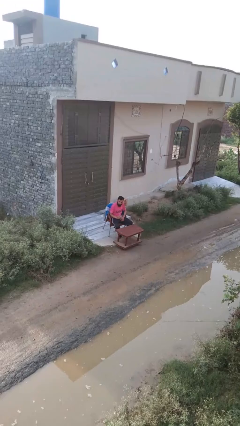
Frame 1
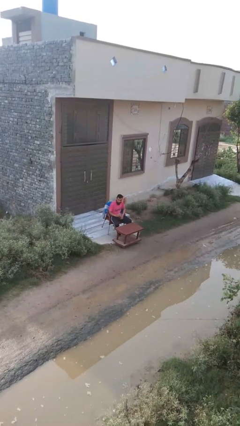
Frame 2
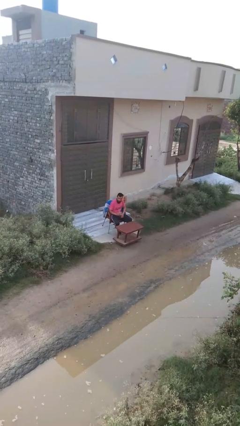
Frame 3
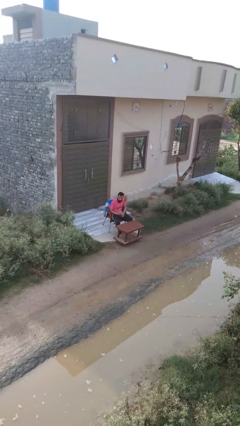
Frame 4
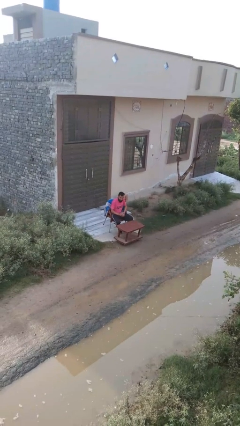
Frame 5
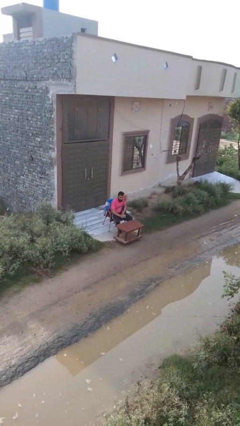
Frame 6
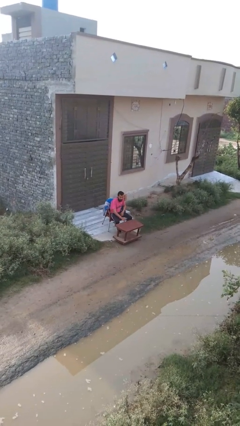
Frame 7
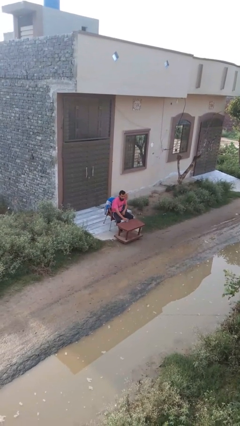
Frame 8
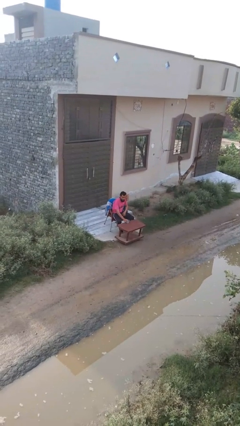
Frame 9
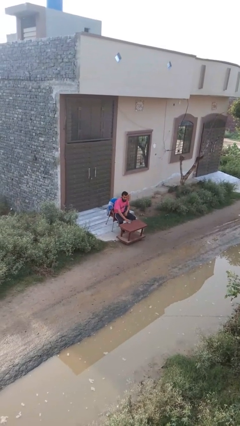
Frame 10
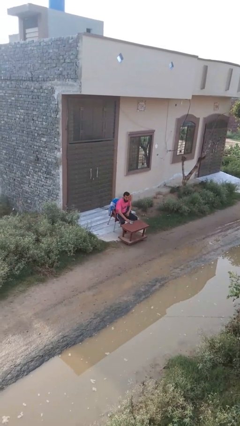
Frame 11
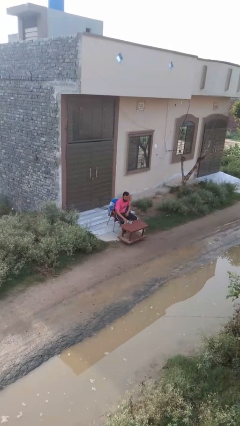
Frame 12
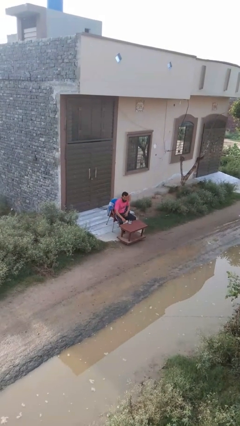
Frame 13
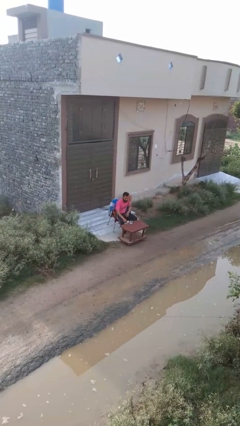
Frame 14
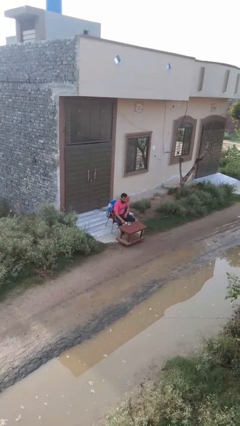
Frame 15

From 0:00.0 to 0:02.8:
person puts down object on table

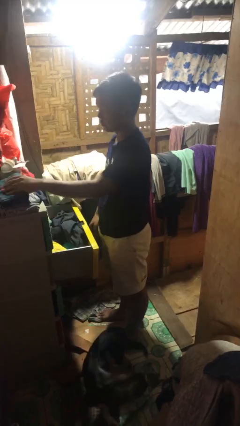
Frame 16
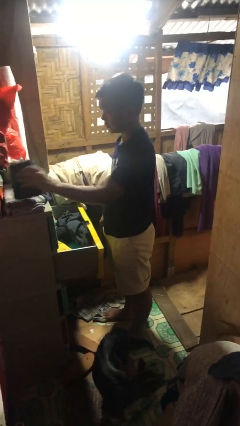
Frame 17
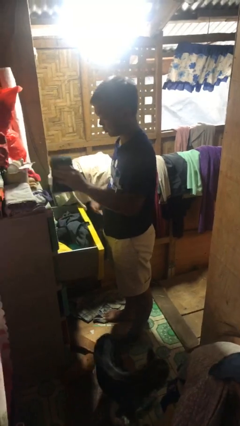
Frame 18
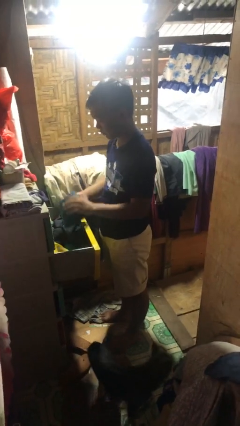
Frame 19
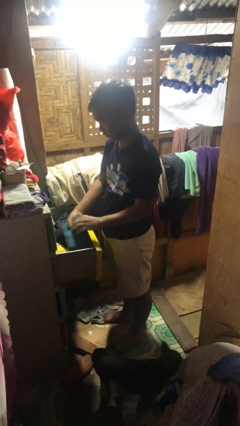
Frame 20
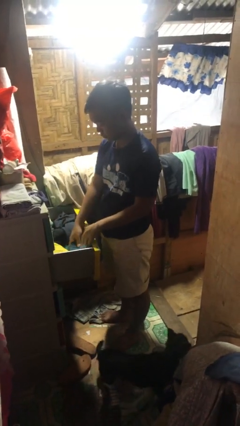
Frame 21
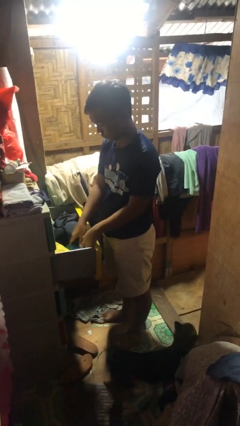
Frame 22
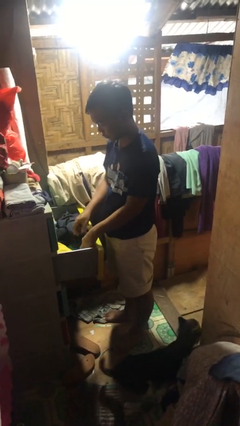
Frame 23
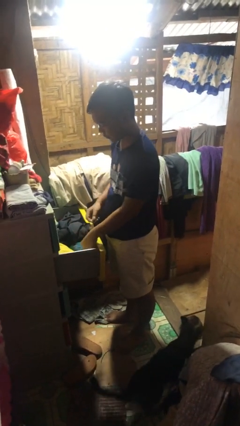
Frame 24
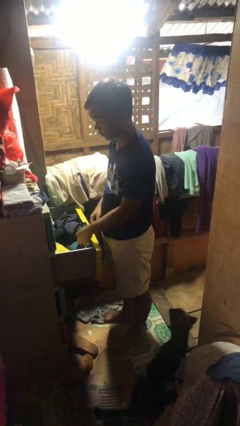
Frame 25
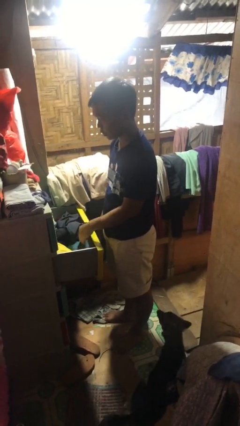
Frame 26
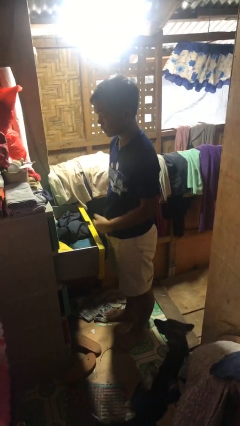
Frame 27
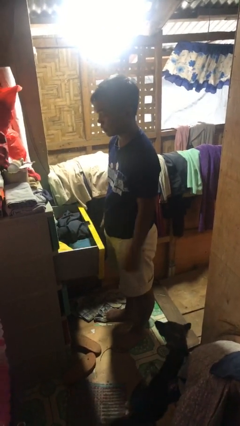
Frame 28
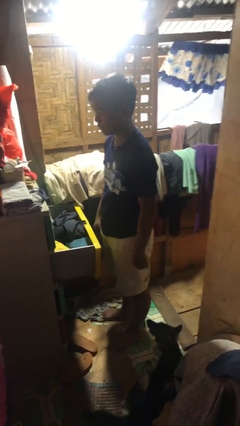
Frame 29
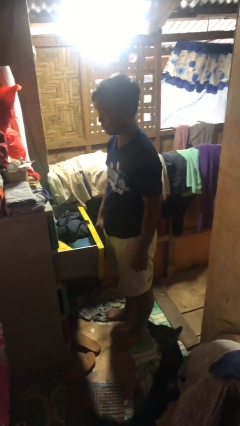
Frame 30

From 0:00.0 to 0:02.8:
person puts clothes into dresser

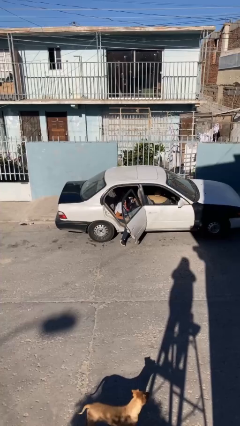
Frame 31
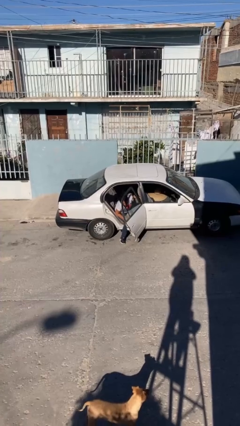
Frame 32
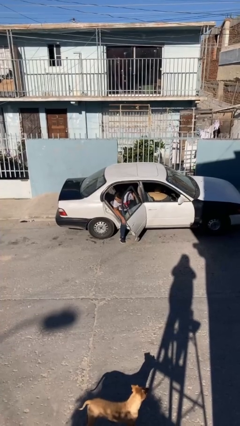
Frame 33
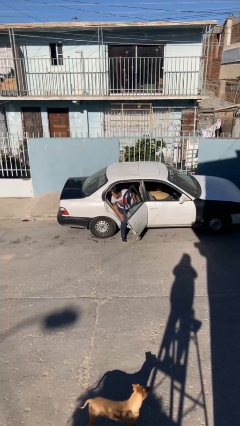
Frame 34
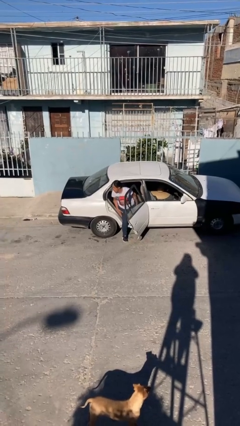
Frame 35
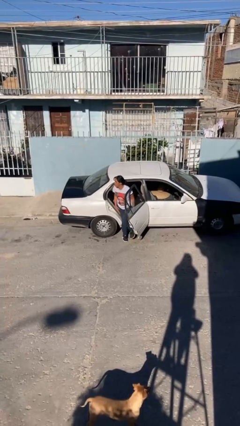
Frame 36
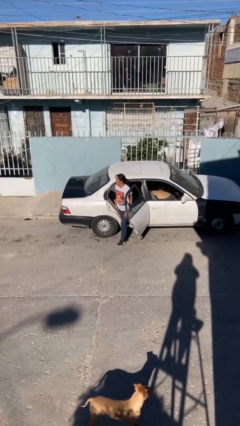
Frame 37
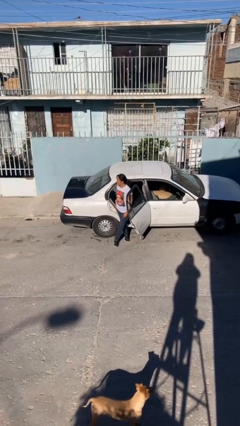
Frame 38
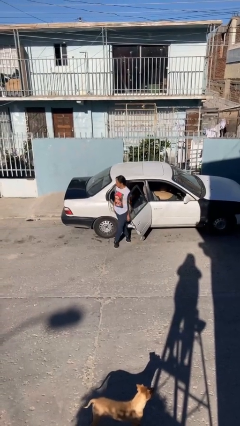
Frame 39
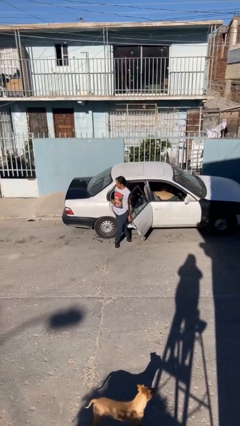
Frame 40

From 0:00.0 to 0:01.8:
person exits car

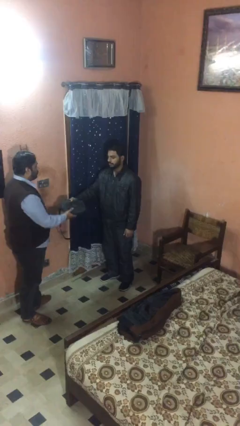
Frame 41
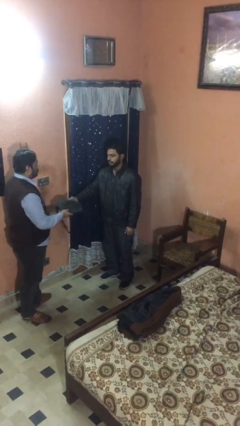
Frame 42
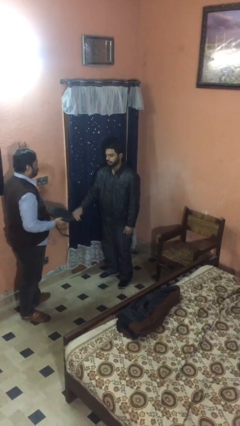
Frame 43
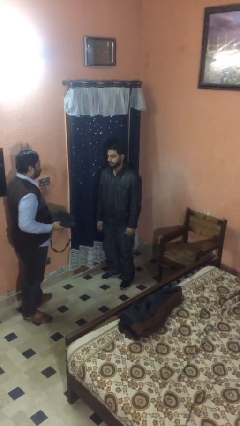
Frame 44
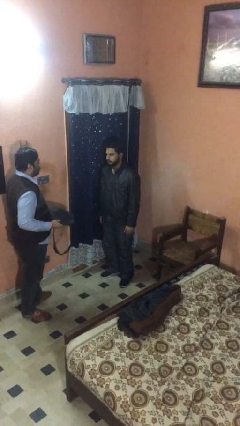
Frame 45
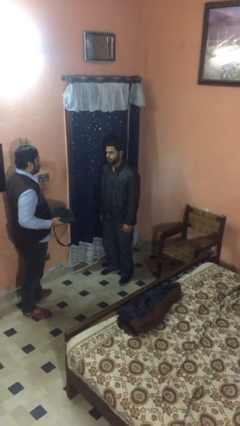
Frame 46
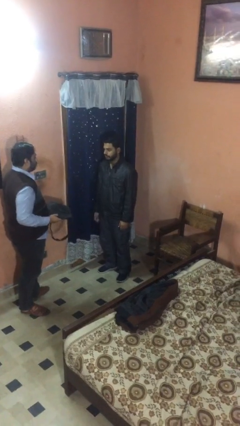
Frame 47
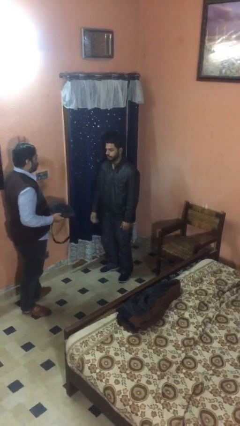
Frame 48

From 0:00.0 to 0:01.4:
person transfers object to person

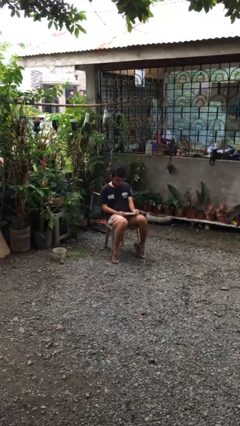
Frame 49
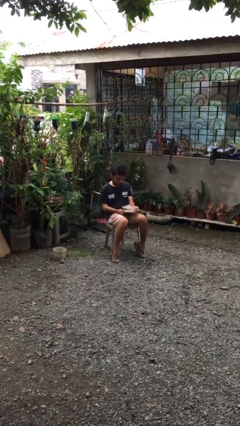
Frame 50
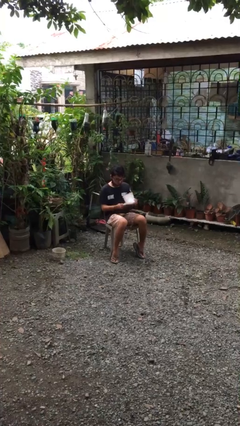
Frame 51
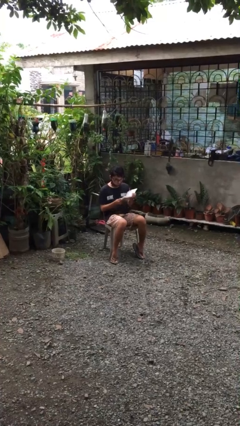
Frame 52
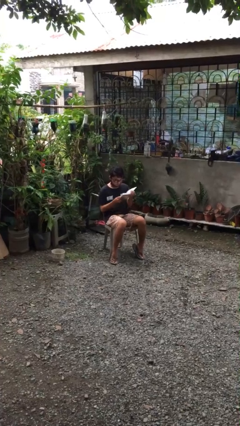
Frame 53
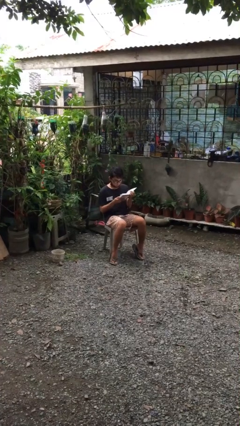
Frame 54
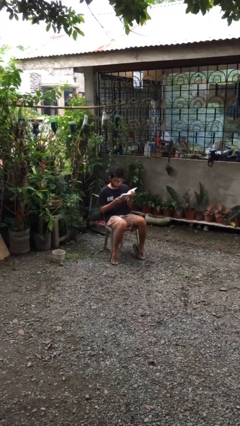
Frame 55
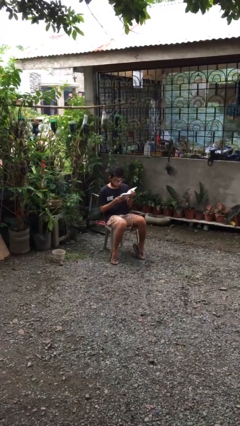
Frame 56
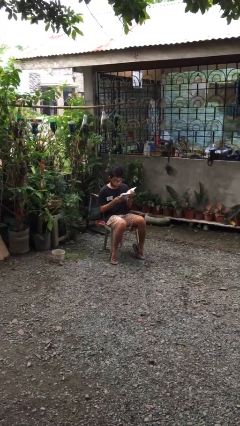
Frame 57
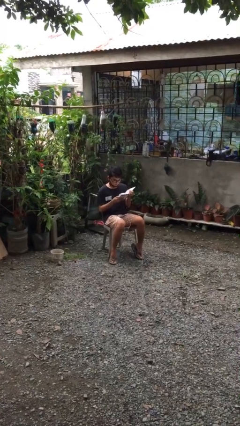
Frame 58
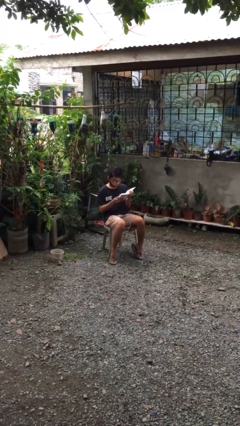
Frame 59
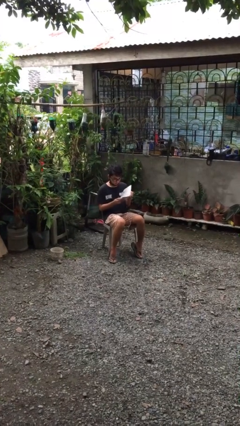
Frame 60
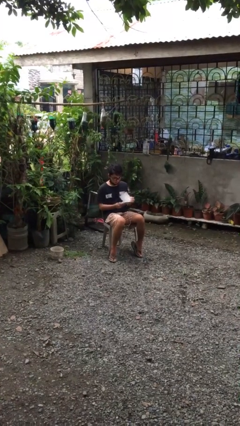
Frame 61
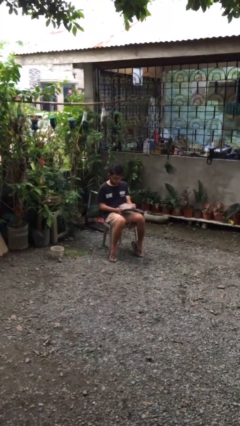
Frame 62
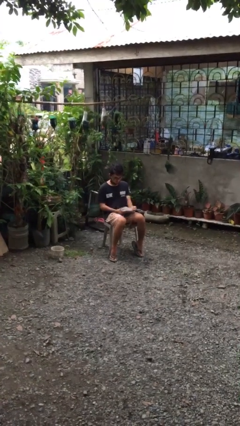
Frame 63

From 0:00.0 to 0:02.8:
person reads document

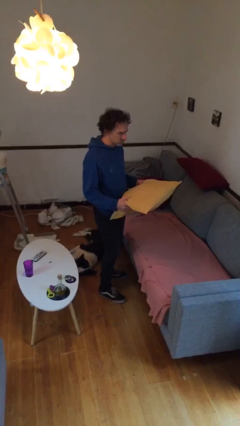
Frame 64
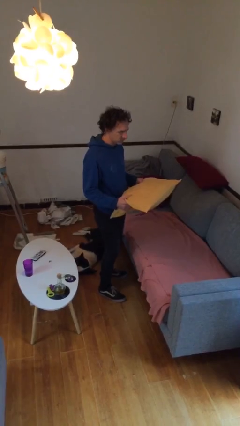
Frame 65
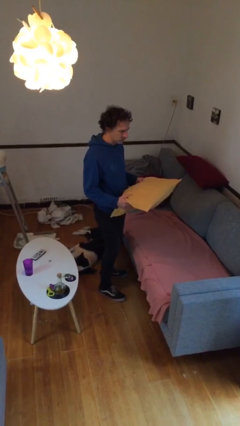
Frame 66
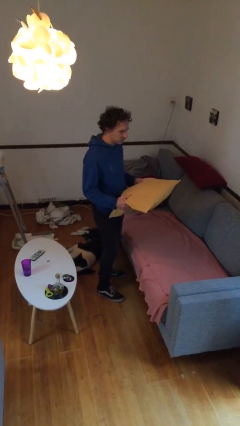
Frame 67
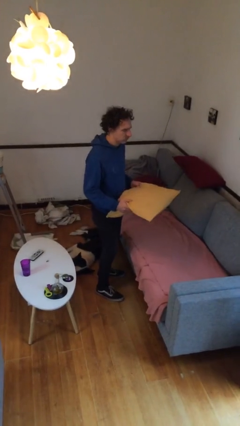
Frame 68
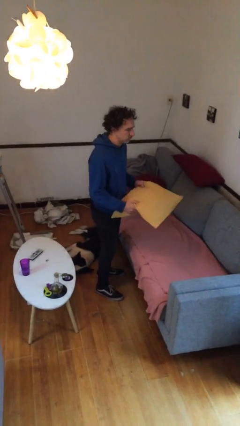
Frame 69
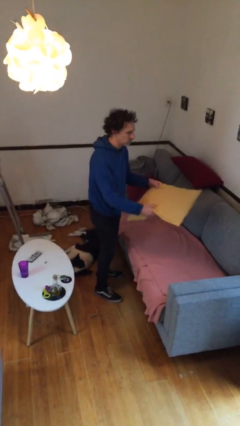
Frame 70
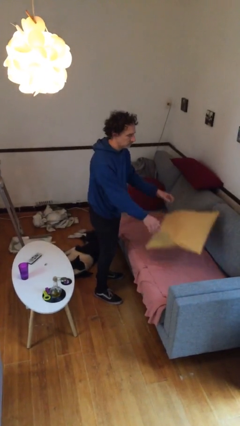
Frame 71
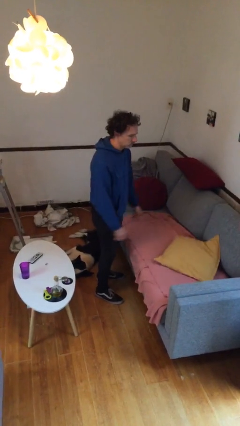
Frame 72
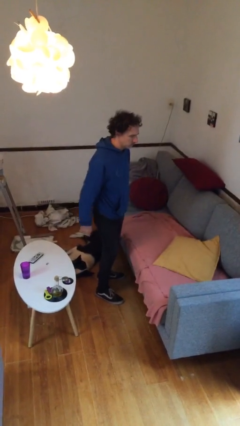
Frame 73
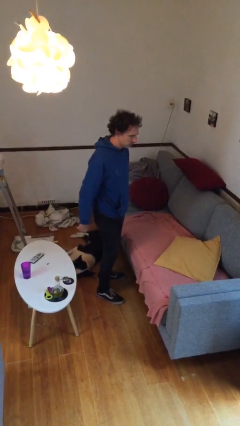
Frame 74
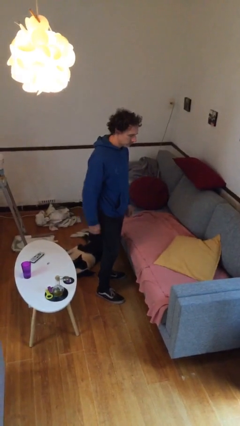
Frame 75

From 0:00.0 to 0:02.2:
person puts down object on couch

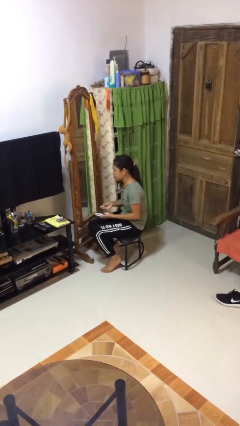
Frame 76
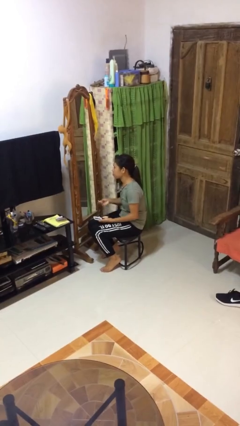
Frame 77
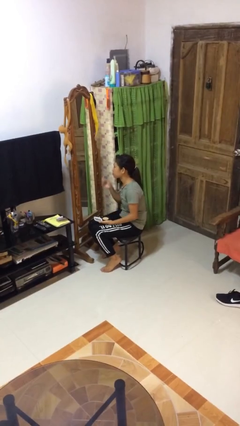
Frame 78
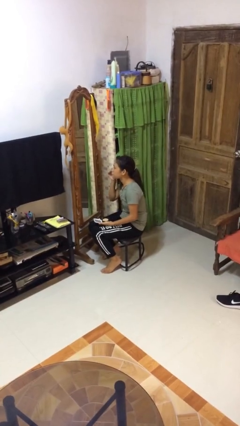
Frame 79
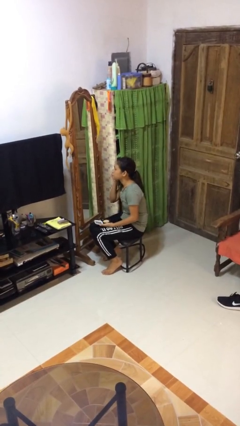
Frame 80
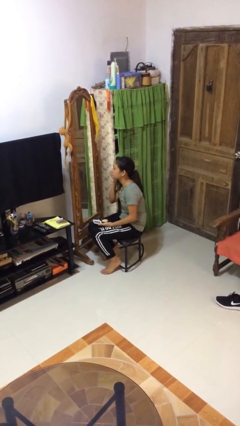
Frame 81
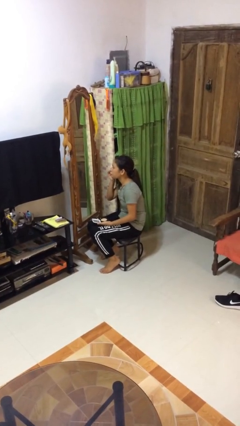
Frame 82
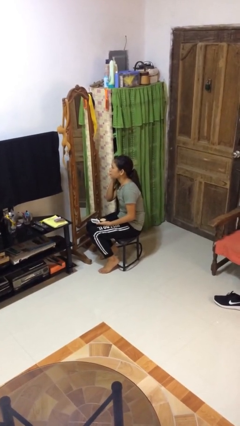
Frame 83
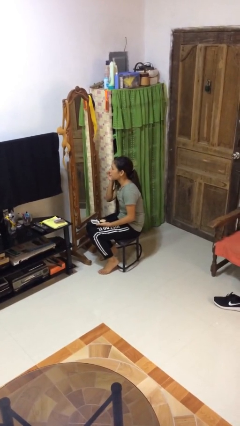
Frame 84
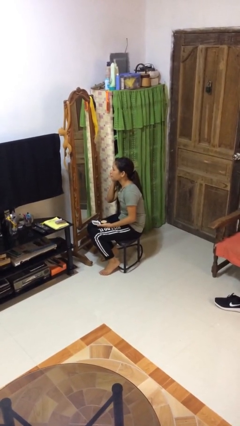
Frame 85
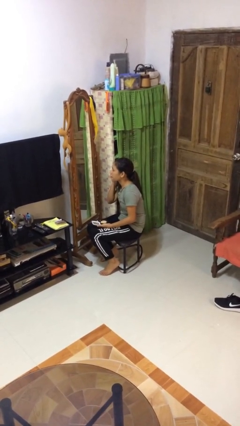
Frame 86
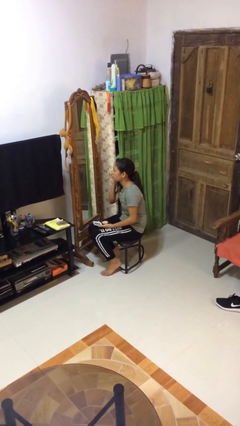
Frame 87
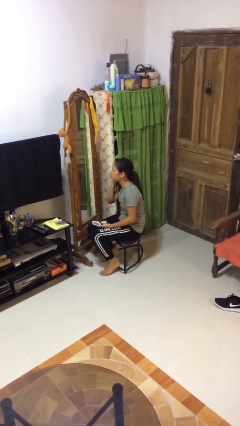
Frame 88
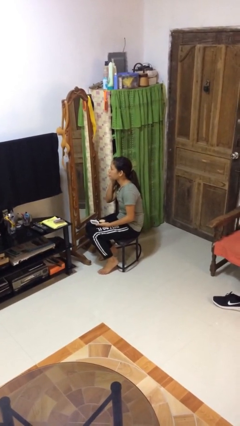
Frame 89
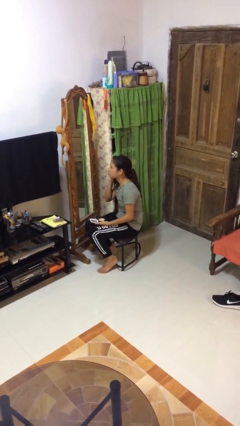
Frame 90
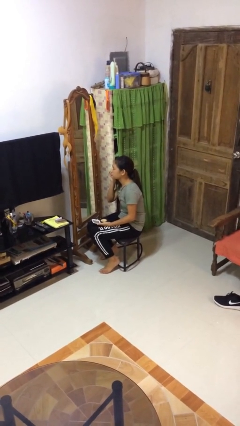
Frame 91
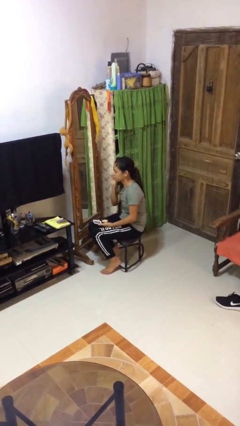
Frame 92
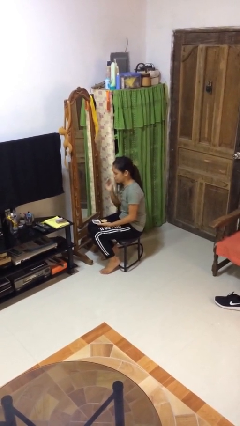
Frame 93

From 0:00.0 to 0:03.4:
person applies foundation makeup
